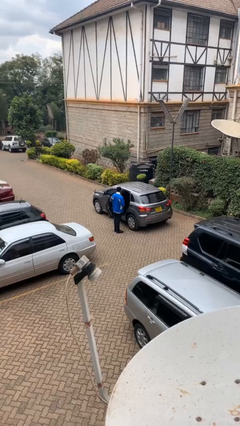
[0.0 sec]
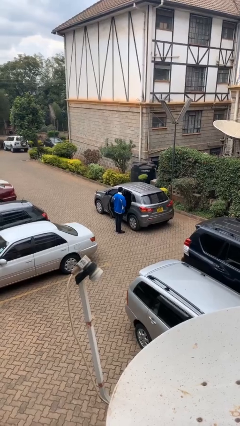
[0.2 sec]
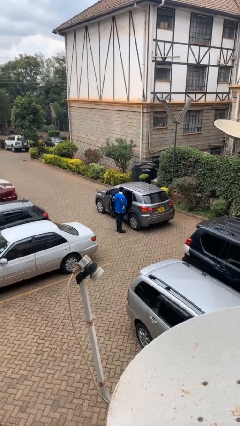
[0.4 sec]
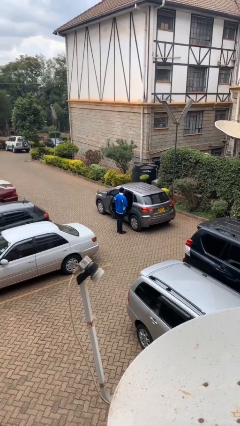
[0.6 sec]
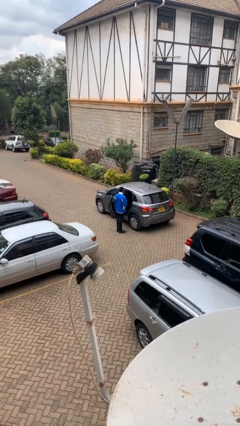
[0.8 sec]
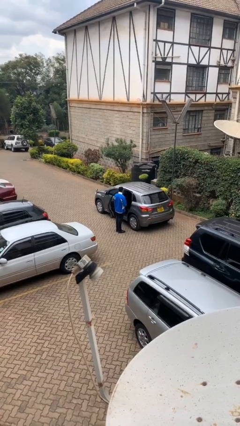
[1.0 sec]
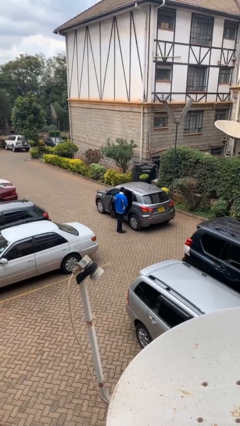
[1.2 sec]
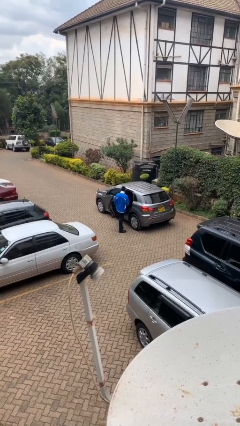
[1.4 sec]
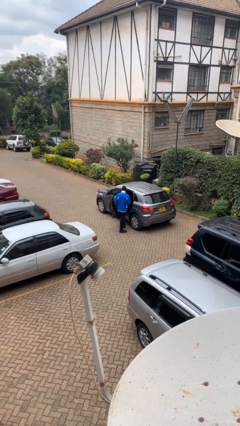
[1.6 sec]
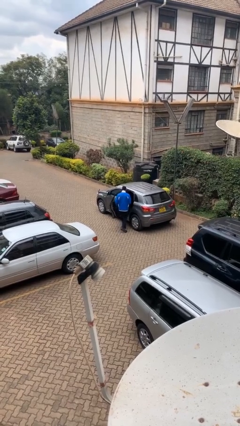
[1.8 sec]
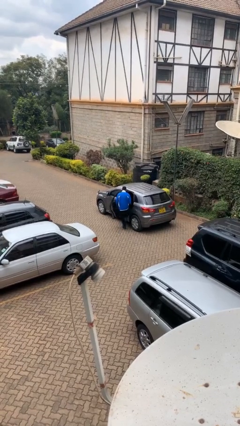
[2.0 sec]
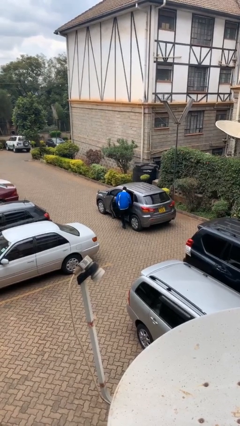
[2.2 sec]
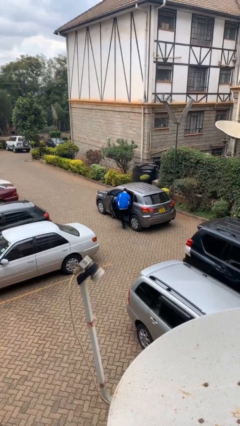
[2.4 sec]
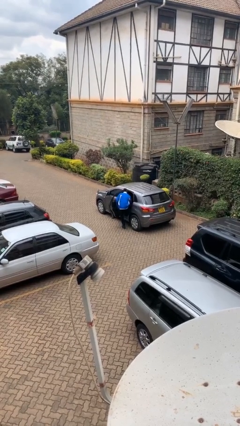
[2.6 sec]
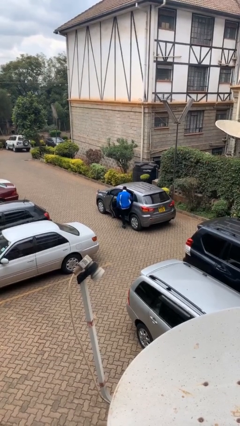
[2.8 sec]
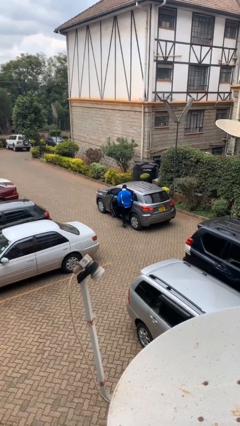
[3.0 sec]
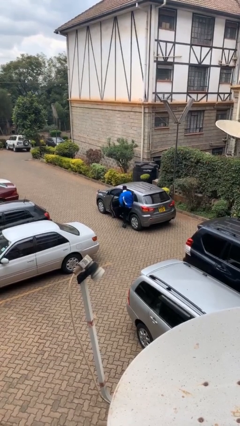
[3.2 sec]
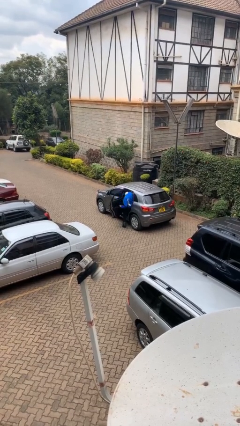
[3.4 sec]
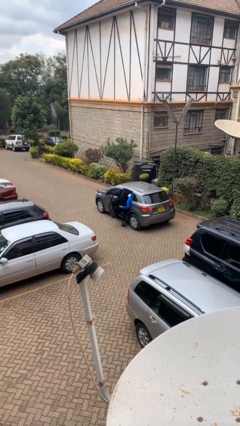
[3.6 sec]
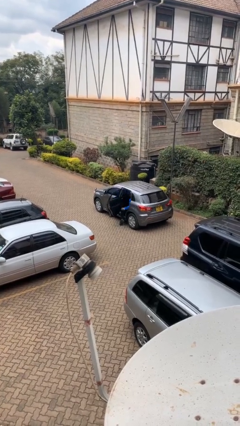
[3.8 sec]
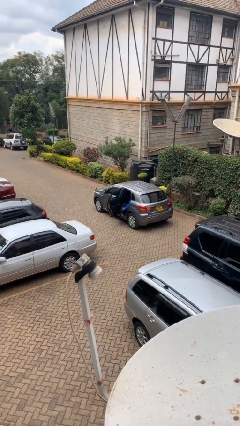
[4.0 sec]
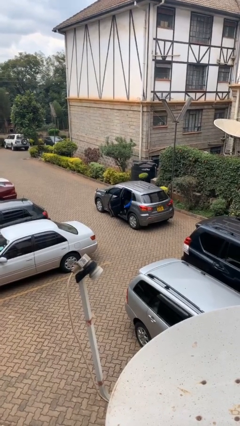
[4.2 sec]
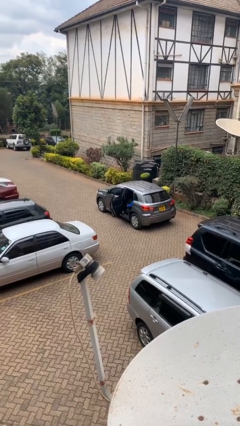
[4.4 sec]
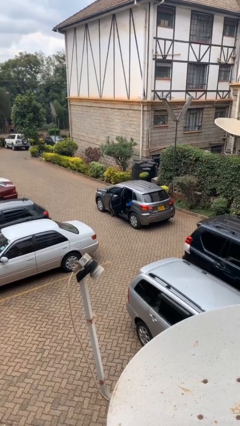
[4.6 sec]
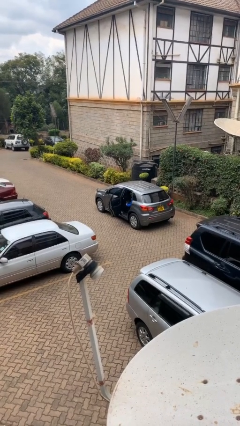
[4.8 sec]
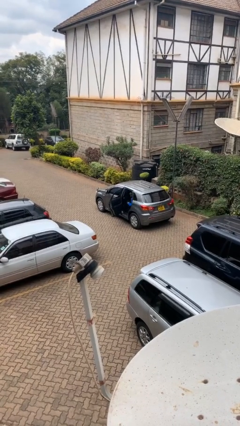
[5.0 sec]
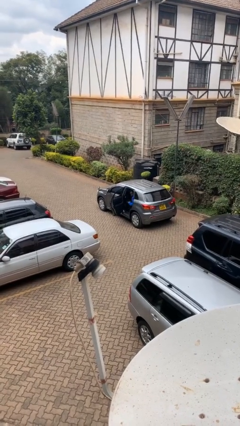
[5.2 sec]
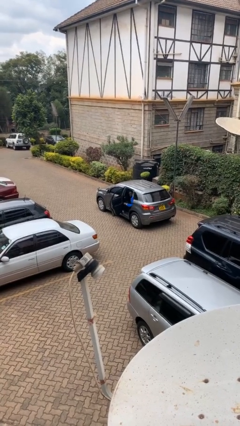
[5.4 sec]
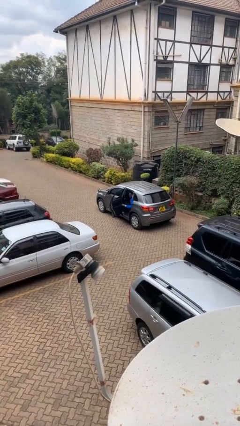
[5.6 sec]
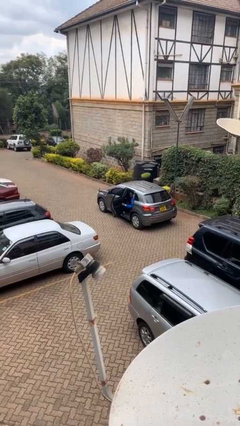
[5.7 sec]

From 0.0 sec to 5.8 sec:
person enters car

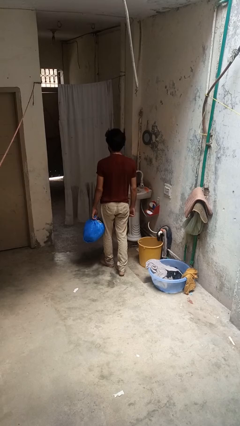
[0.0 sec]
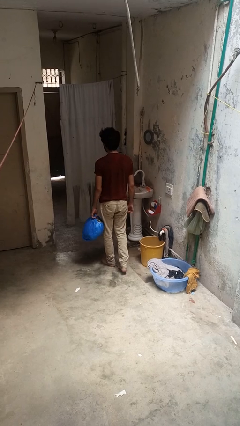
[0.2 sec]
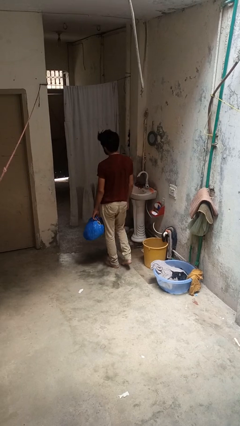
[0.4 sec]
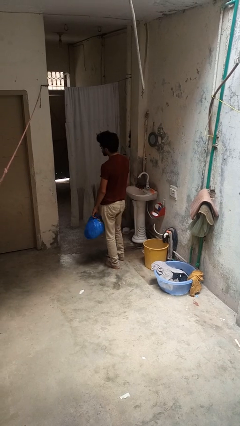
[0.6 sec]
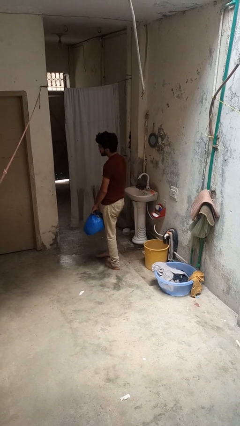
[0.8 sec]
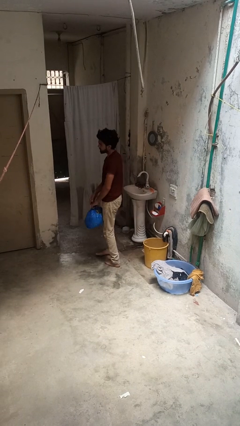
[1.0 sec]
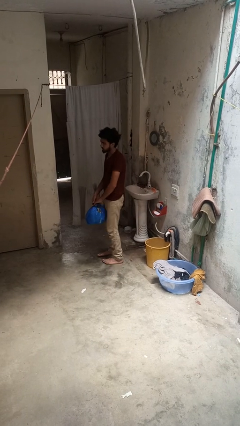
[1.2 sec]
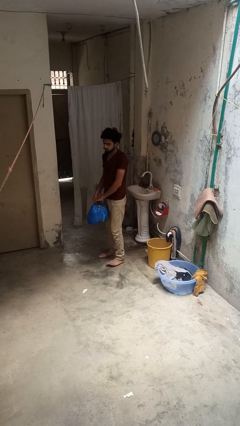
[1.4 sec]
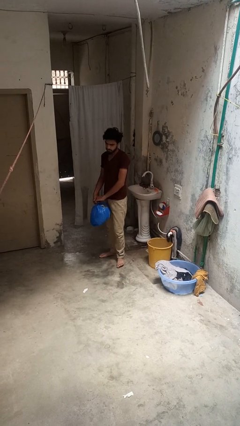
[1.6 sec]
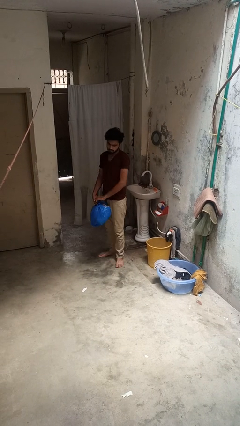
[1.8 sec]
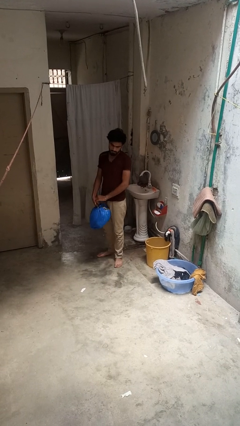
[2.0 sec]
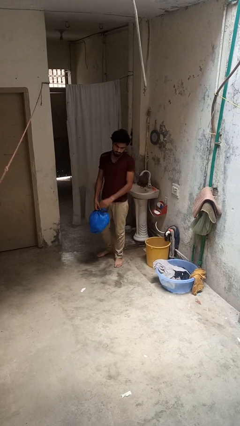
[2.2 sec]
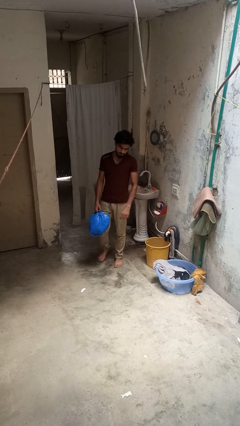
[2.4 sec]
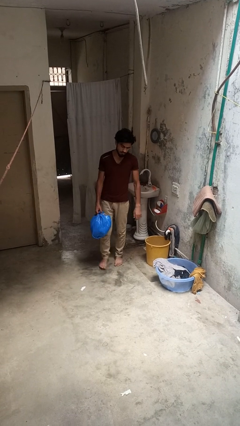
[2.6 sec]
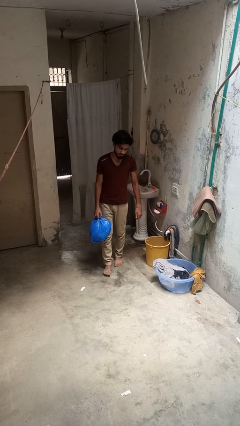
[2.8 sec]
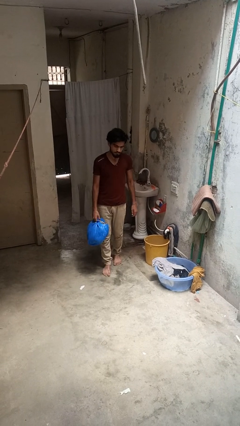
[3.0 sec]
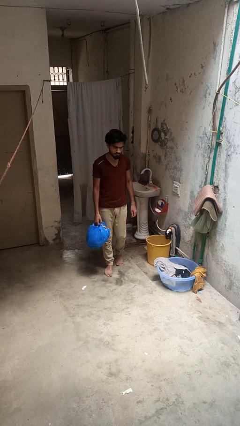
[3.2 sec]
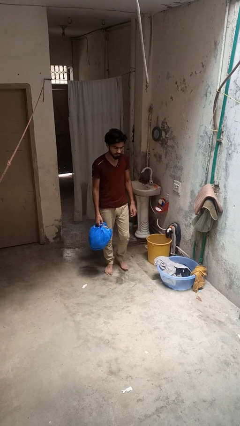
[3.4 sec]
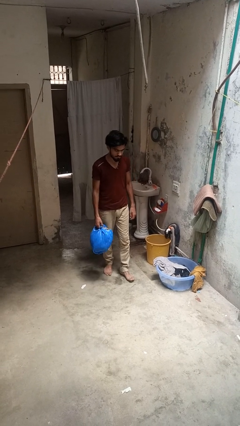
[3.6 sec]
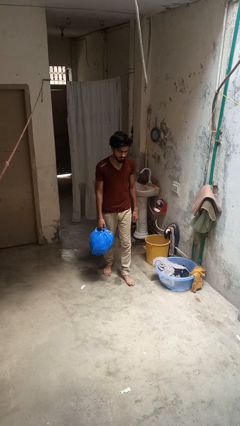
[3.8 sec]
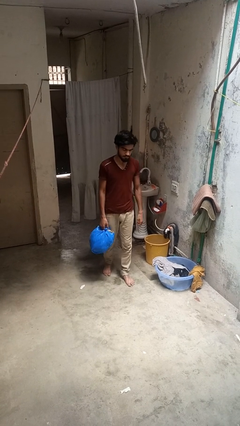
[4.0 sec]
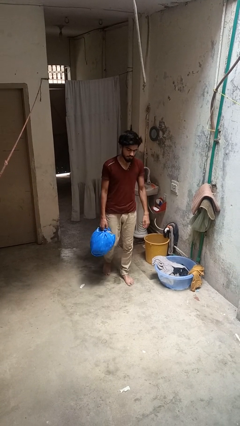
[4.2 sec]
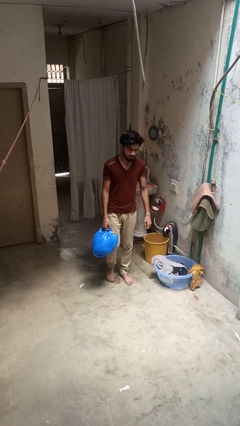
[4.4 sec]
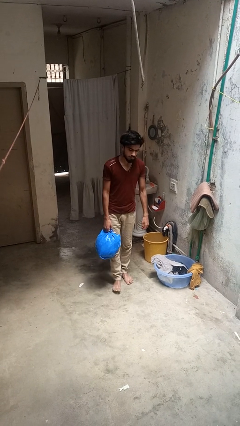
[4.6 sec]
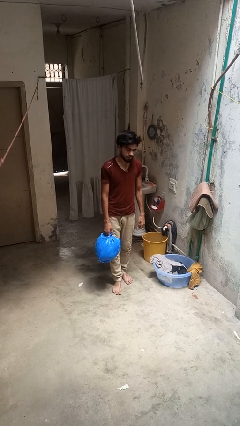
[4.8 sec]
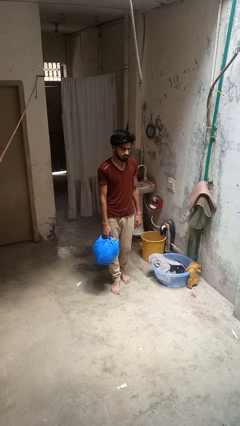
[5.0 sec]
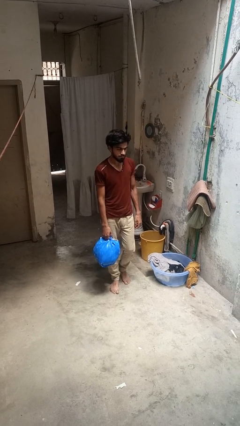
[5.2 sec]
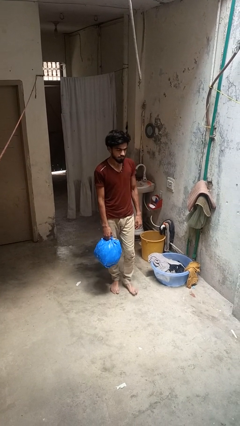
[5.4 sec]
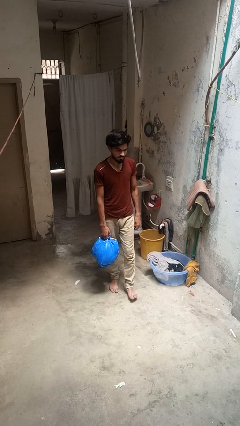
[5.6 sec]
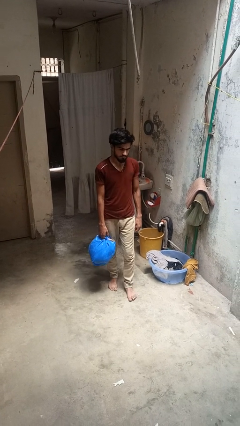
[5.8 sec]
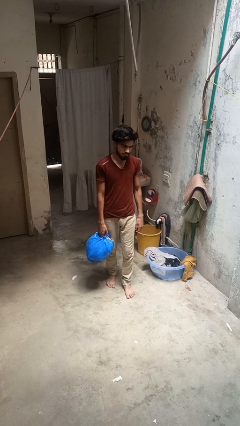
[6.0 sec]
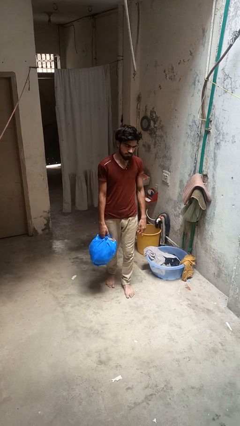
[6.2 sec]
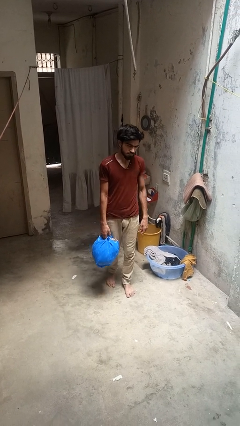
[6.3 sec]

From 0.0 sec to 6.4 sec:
person carries groceries

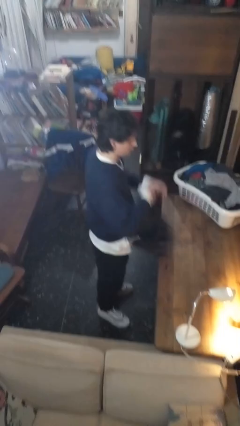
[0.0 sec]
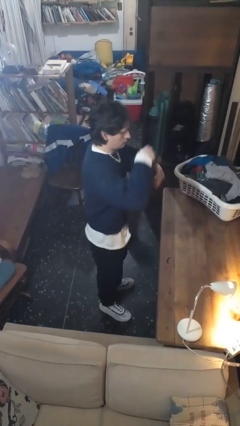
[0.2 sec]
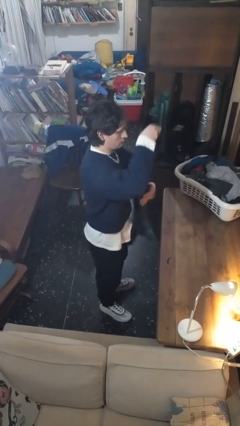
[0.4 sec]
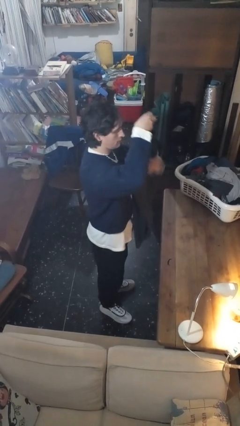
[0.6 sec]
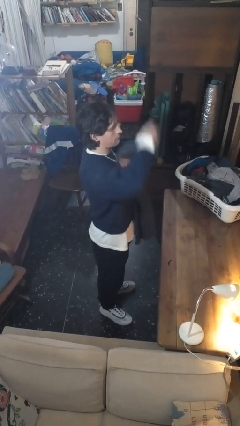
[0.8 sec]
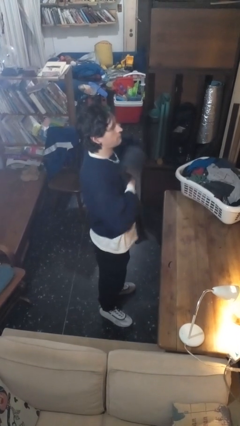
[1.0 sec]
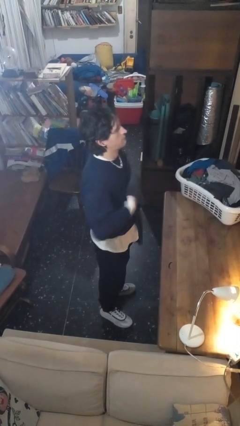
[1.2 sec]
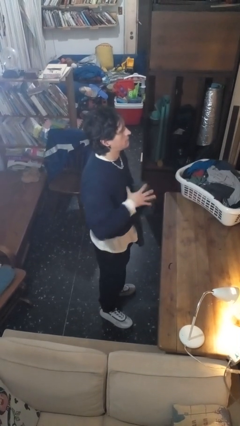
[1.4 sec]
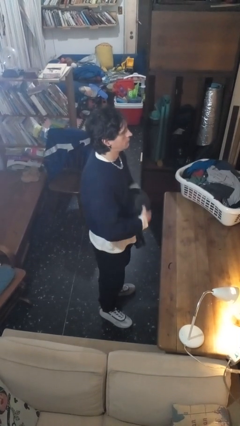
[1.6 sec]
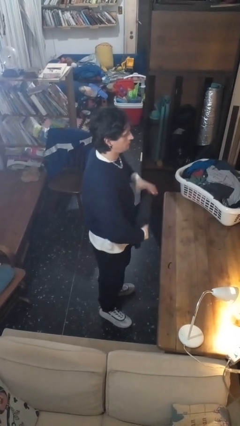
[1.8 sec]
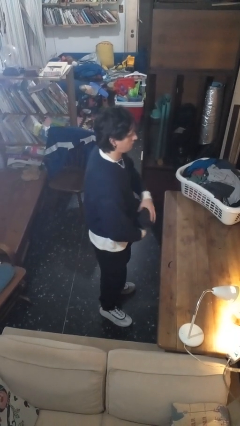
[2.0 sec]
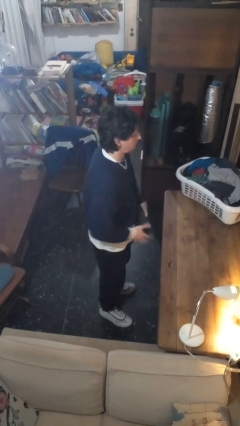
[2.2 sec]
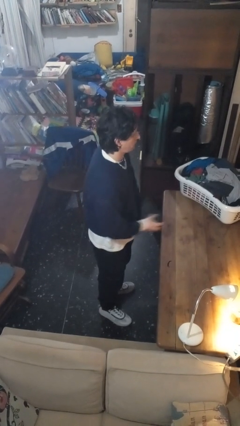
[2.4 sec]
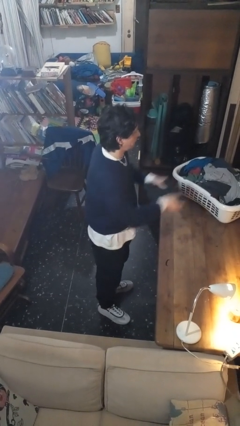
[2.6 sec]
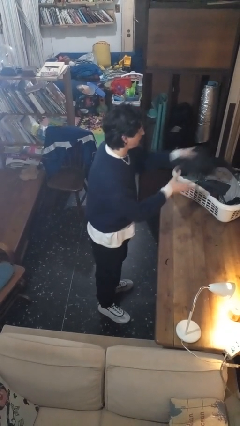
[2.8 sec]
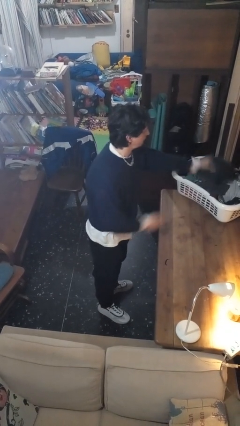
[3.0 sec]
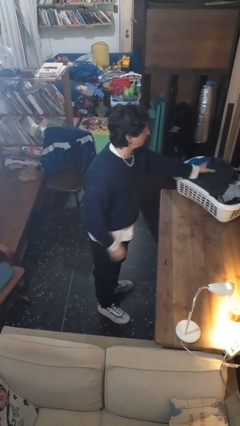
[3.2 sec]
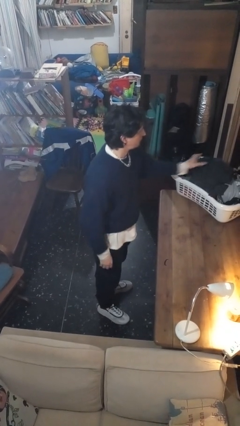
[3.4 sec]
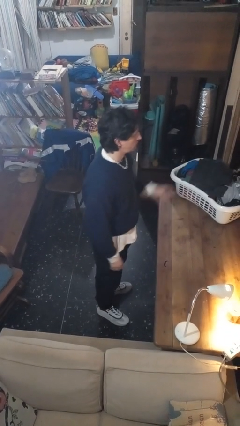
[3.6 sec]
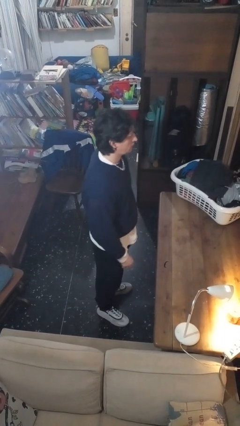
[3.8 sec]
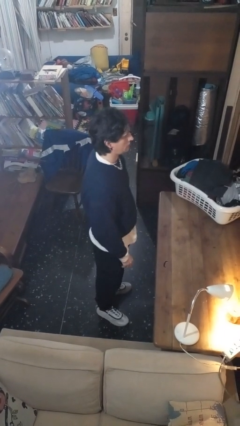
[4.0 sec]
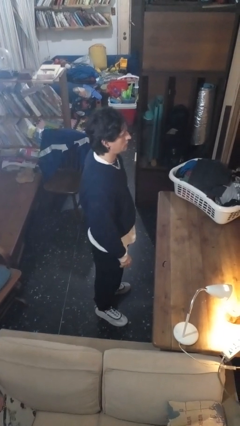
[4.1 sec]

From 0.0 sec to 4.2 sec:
person folds pants

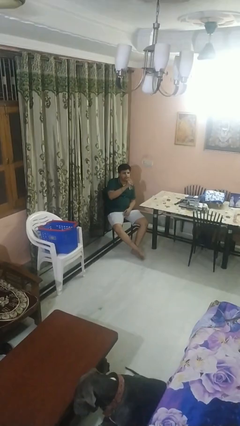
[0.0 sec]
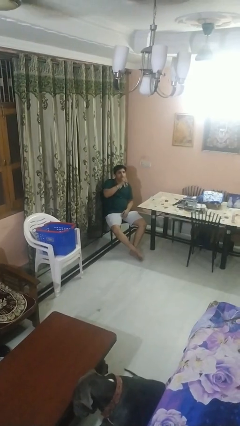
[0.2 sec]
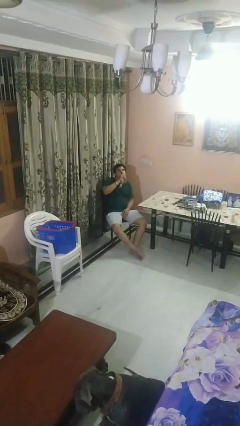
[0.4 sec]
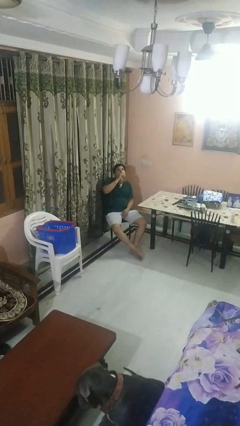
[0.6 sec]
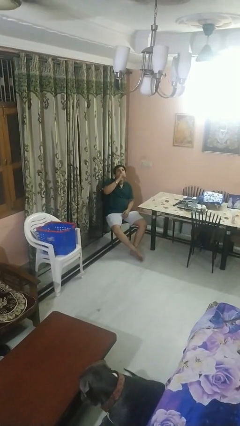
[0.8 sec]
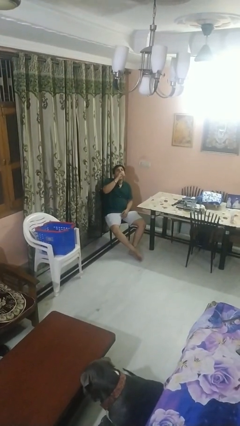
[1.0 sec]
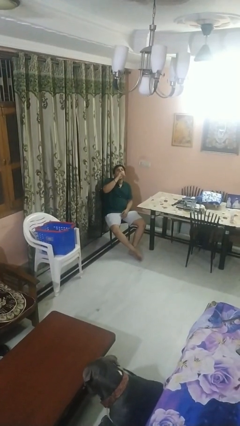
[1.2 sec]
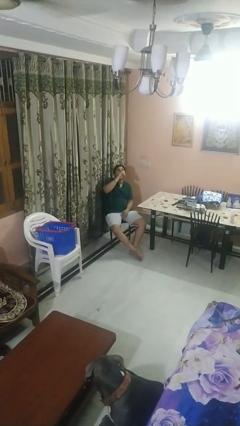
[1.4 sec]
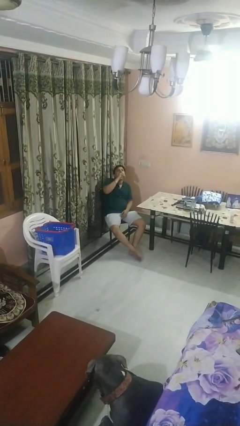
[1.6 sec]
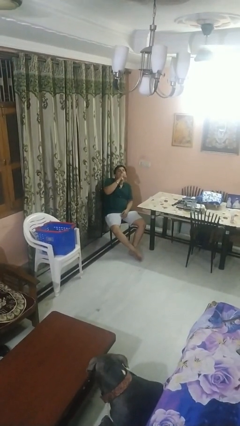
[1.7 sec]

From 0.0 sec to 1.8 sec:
person drinks from bottle
